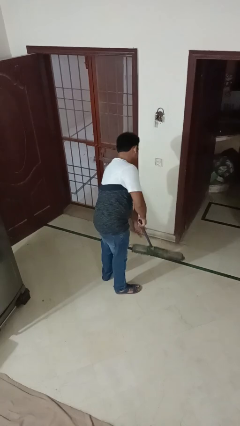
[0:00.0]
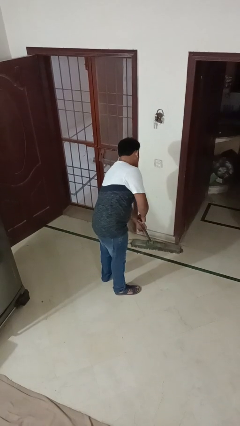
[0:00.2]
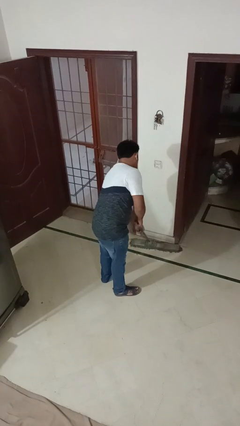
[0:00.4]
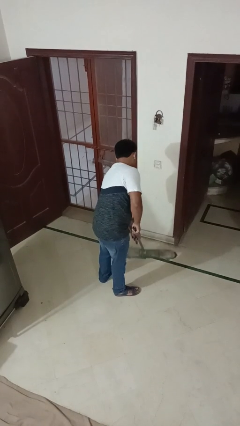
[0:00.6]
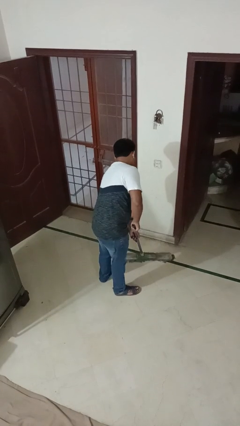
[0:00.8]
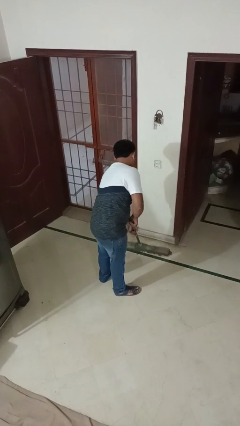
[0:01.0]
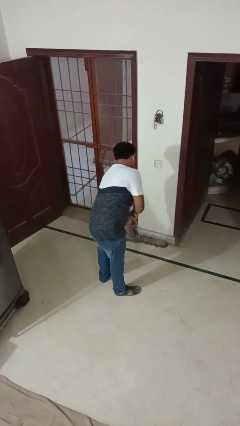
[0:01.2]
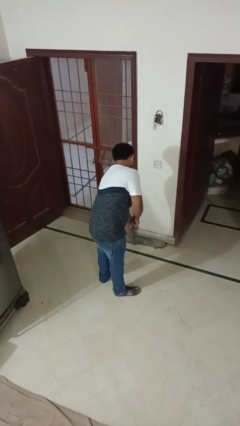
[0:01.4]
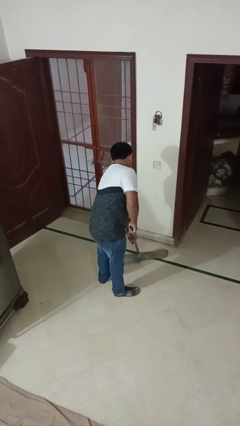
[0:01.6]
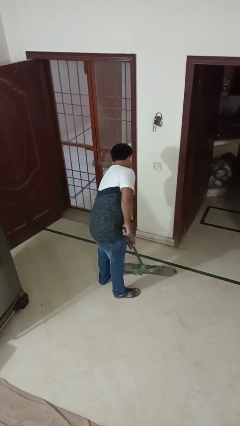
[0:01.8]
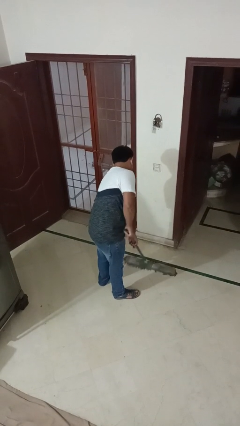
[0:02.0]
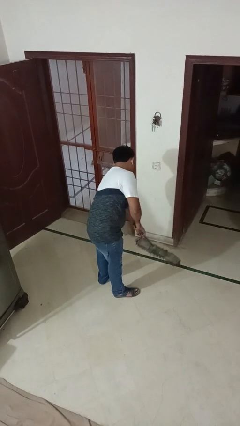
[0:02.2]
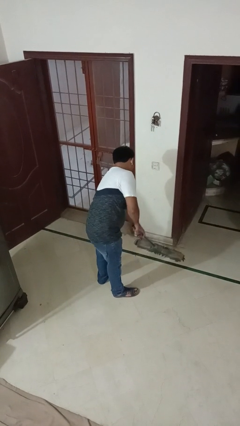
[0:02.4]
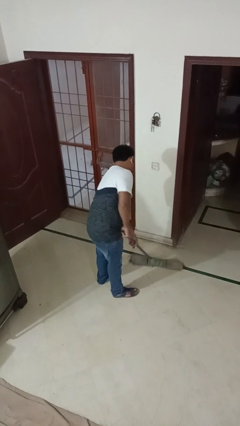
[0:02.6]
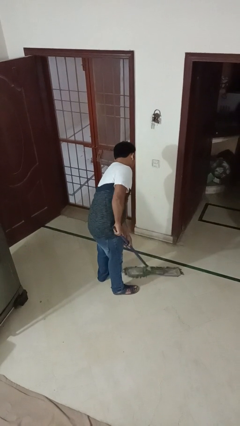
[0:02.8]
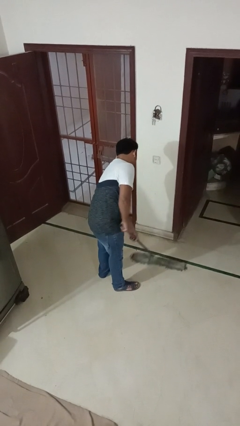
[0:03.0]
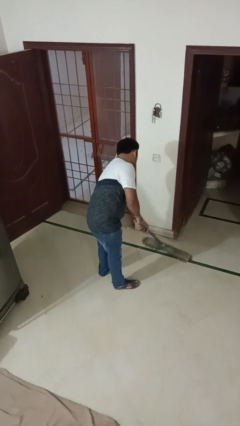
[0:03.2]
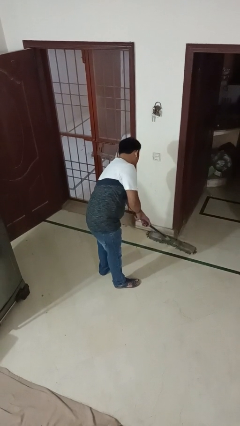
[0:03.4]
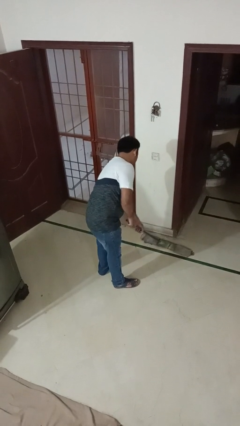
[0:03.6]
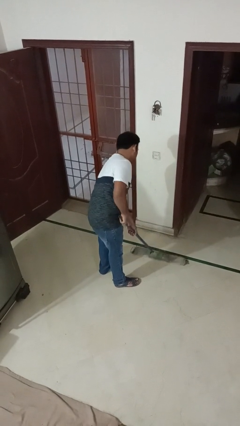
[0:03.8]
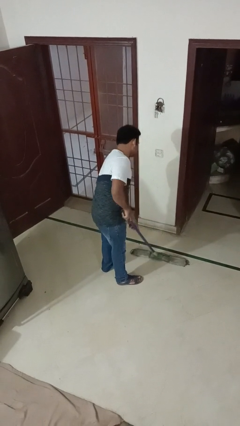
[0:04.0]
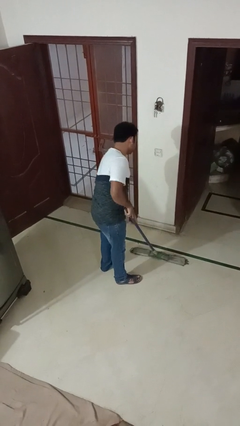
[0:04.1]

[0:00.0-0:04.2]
person mops

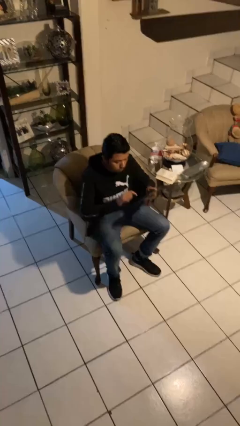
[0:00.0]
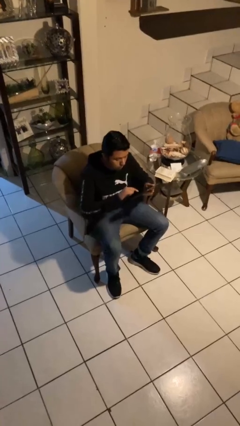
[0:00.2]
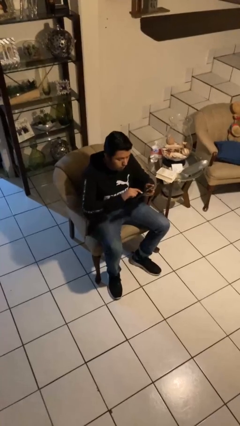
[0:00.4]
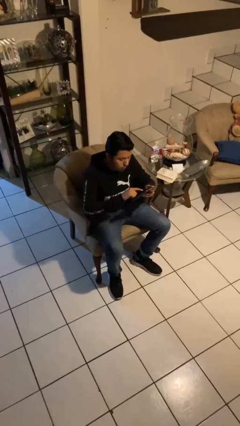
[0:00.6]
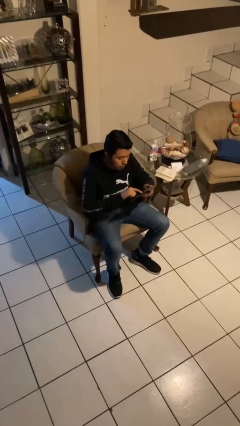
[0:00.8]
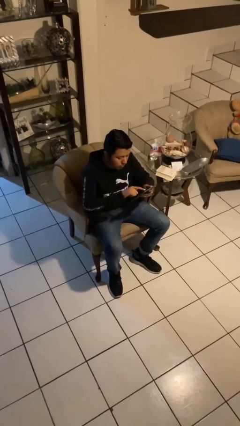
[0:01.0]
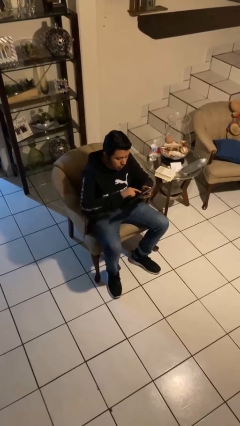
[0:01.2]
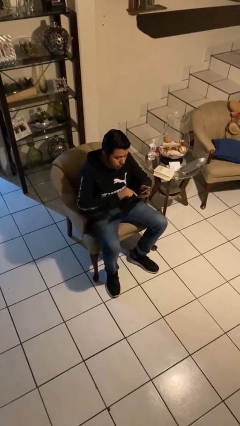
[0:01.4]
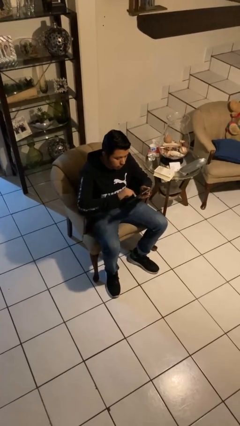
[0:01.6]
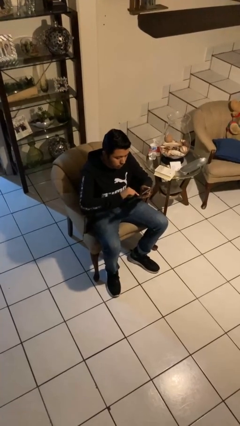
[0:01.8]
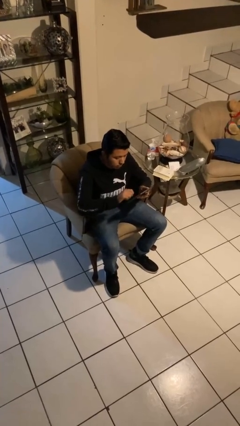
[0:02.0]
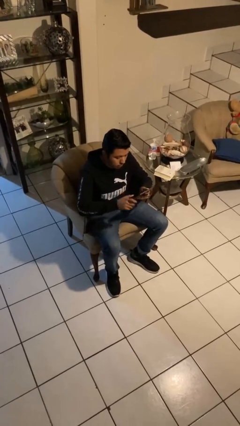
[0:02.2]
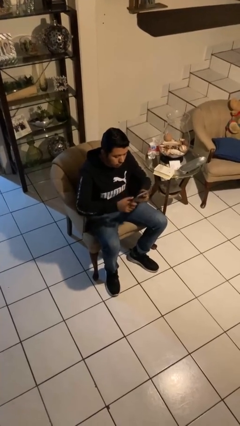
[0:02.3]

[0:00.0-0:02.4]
person interacts with tablet

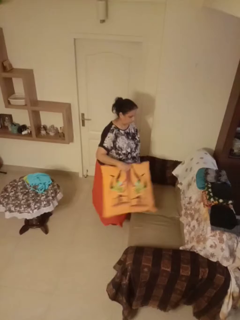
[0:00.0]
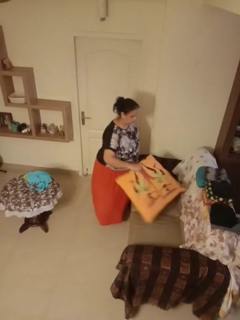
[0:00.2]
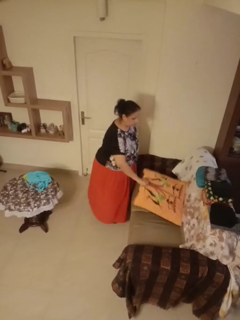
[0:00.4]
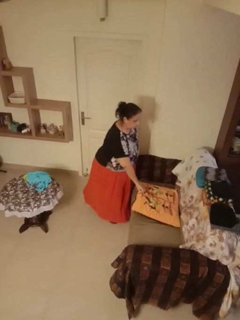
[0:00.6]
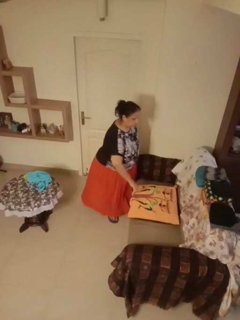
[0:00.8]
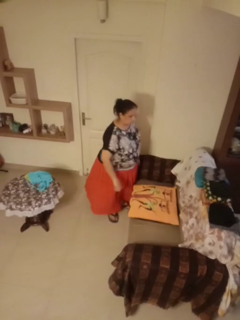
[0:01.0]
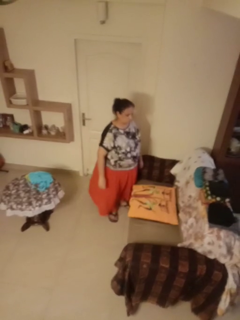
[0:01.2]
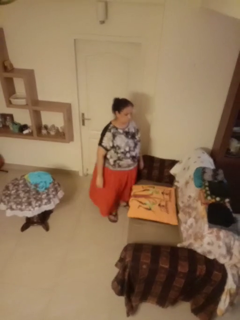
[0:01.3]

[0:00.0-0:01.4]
person puts down object on couch

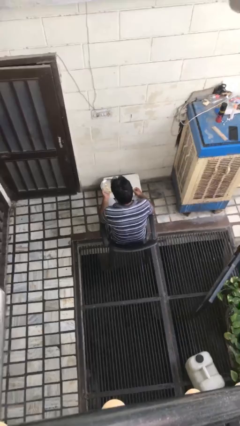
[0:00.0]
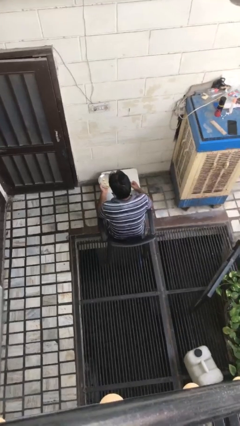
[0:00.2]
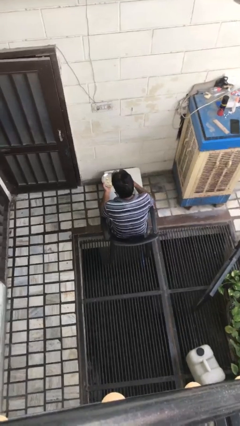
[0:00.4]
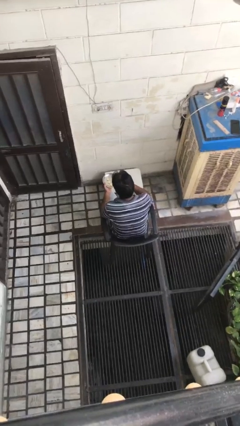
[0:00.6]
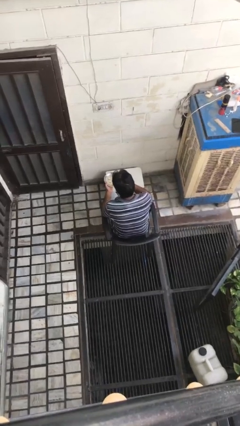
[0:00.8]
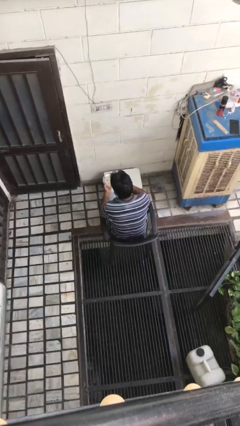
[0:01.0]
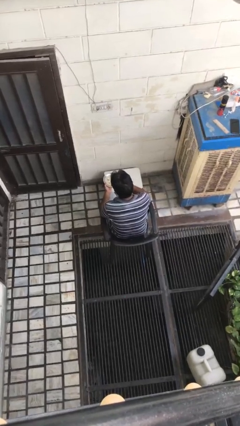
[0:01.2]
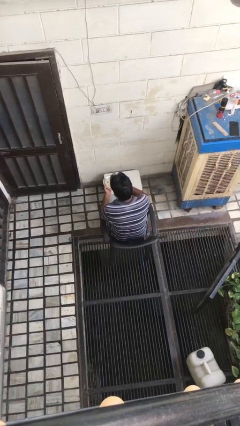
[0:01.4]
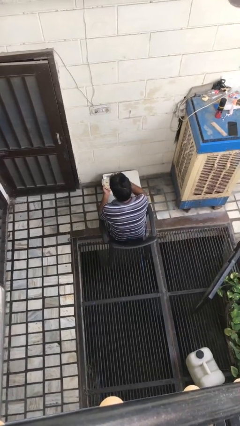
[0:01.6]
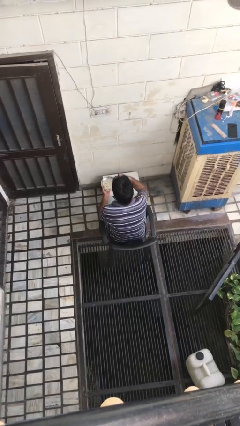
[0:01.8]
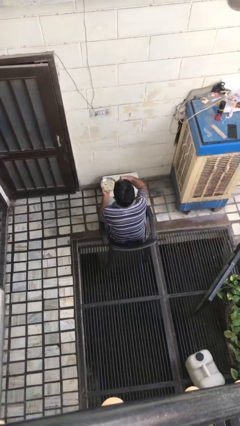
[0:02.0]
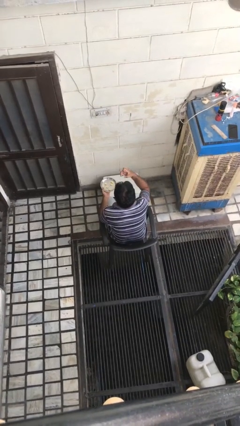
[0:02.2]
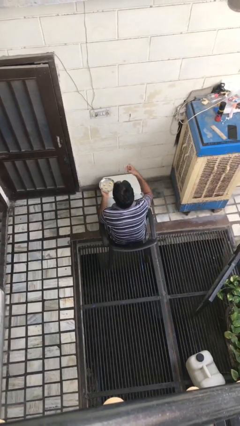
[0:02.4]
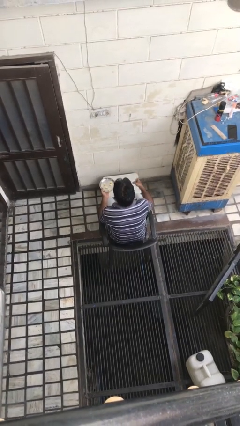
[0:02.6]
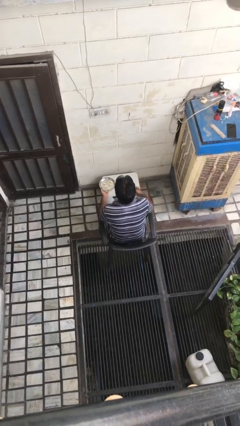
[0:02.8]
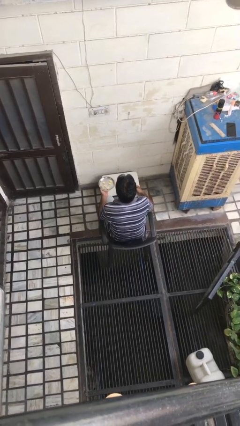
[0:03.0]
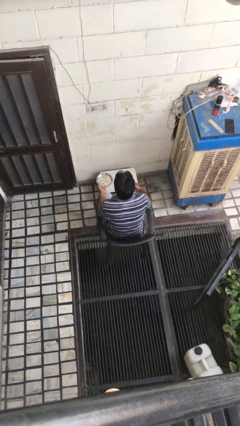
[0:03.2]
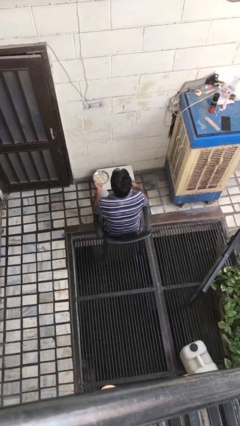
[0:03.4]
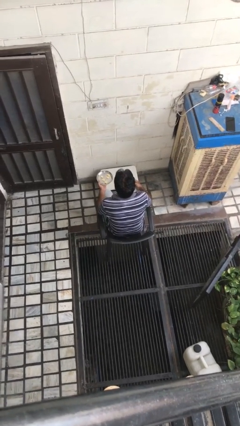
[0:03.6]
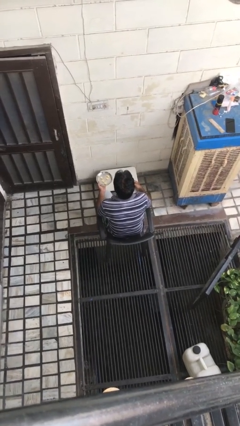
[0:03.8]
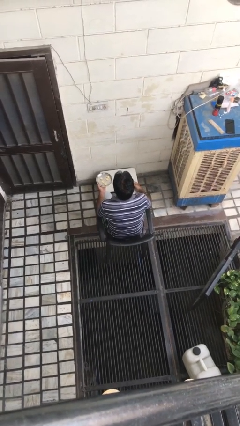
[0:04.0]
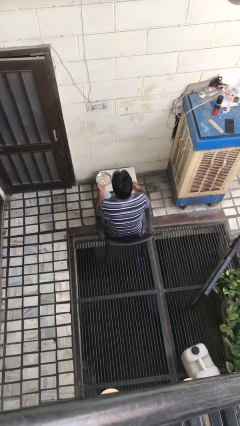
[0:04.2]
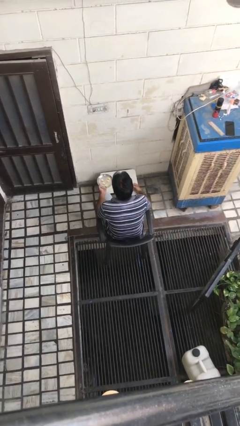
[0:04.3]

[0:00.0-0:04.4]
person eats with hands

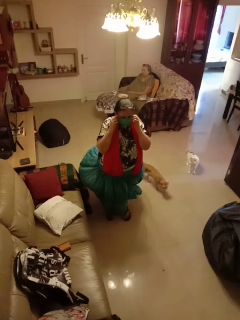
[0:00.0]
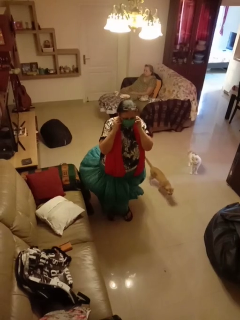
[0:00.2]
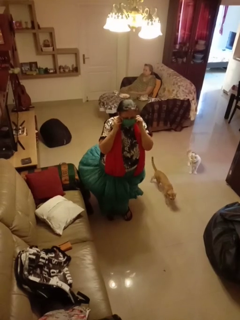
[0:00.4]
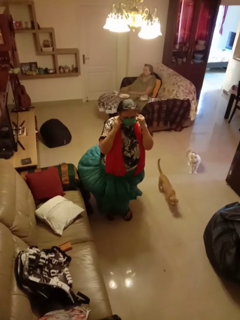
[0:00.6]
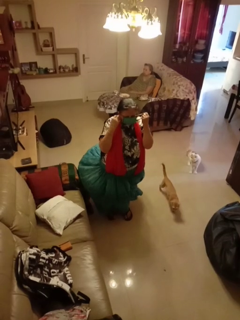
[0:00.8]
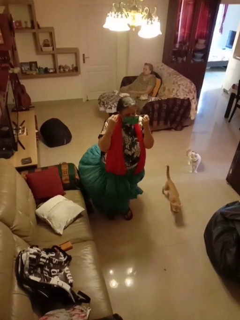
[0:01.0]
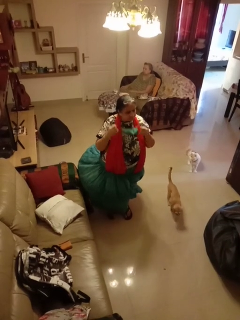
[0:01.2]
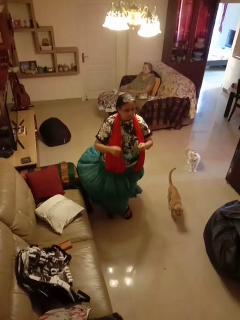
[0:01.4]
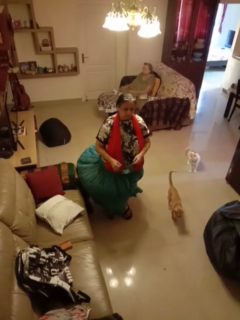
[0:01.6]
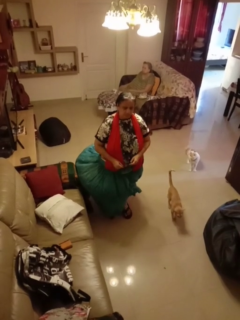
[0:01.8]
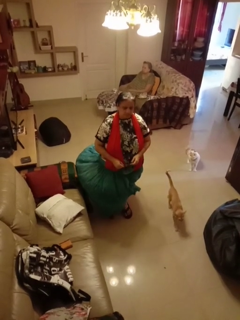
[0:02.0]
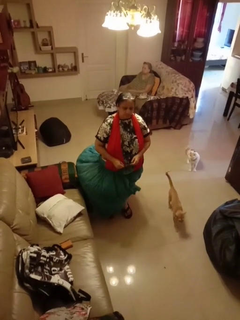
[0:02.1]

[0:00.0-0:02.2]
person takes off facemask

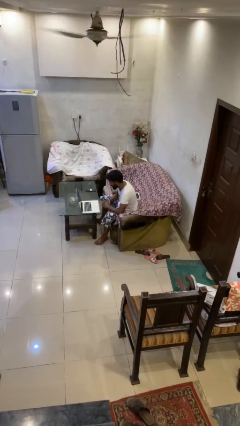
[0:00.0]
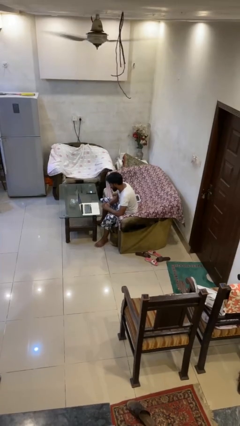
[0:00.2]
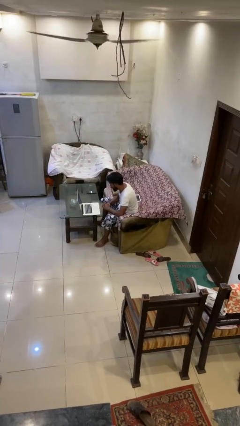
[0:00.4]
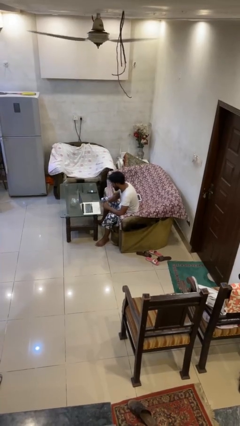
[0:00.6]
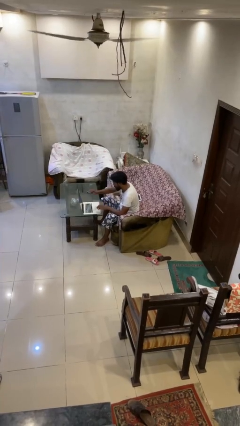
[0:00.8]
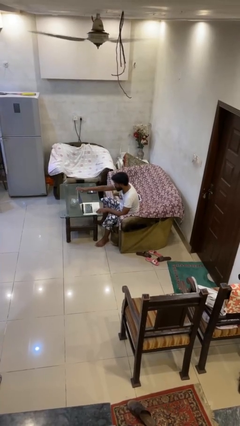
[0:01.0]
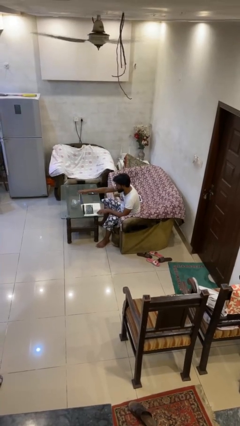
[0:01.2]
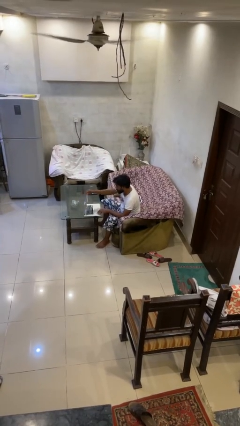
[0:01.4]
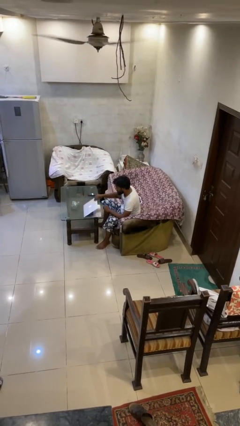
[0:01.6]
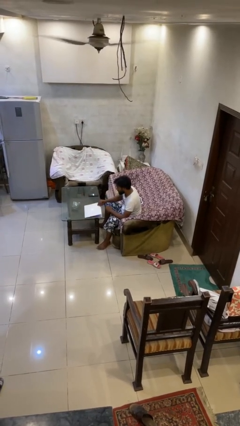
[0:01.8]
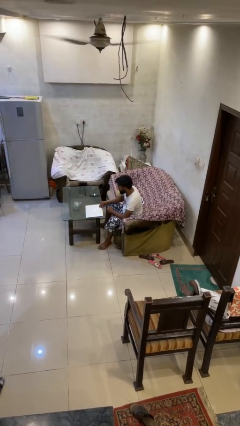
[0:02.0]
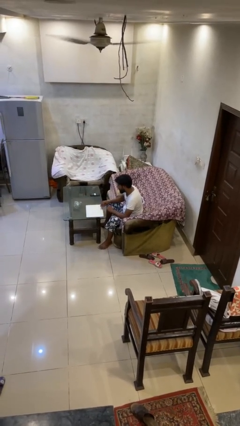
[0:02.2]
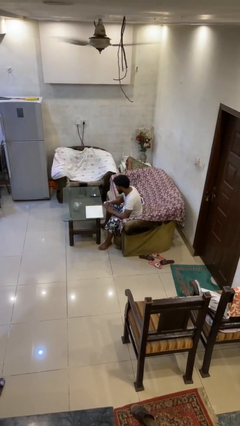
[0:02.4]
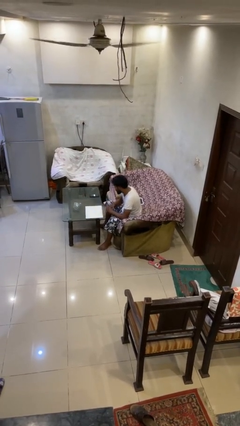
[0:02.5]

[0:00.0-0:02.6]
person closes laptop

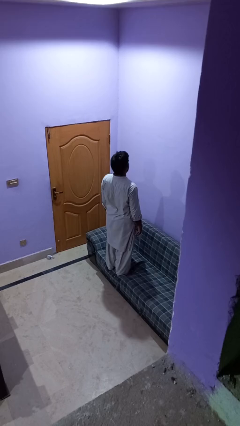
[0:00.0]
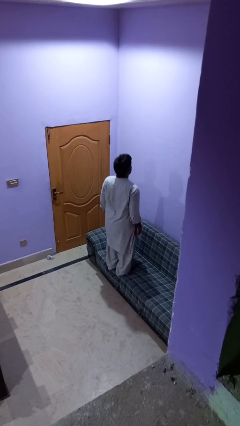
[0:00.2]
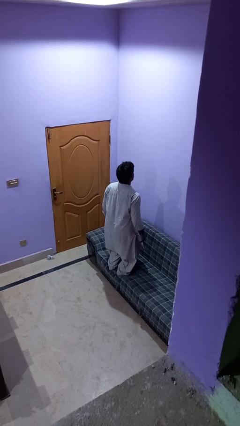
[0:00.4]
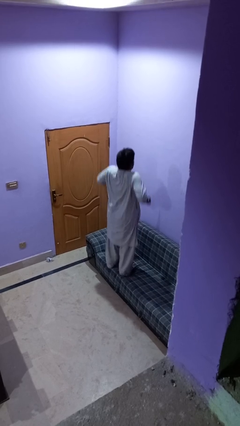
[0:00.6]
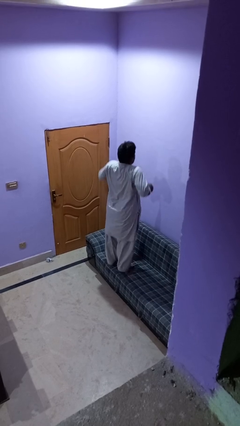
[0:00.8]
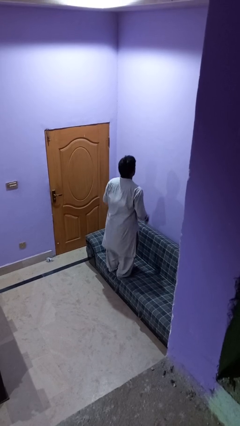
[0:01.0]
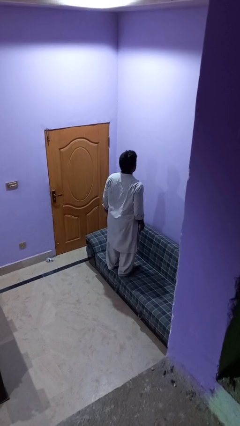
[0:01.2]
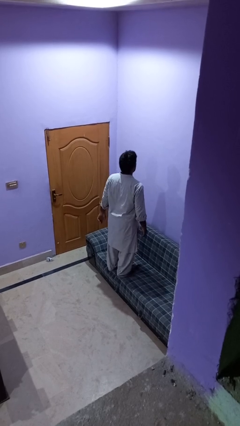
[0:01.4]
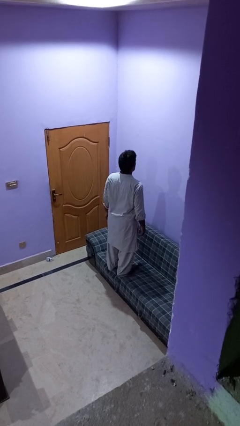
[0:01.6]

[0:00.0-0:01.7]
person jumps on couch
